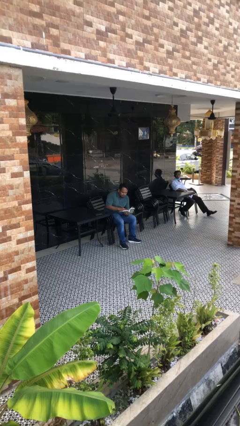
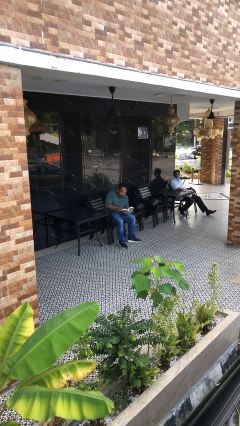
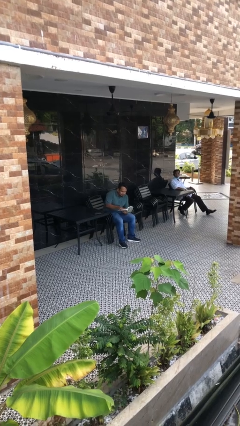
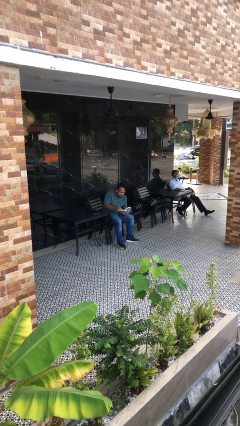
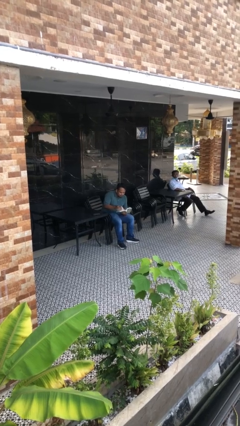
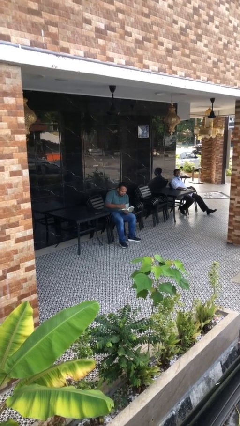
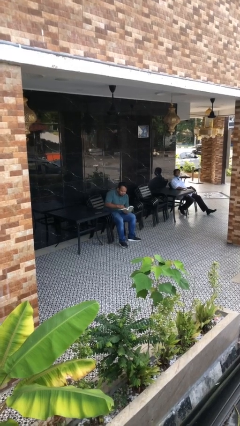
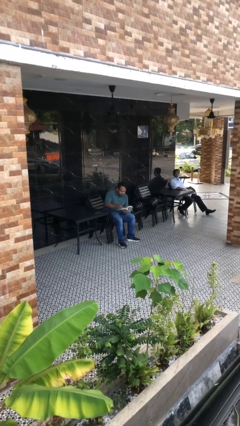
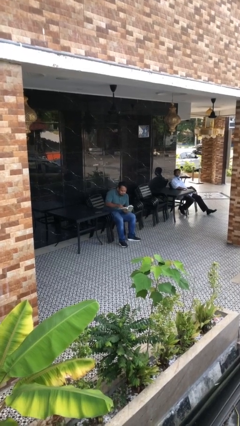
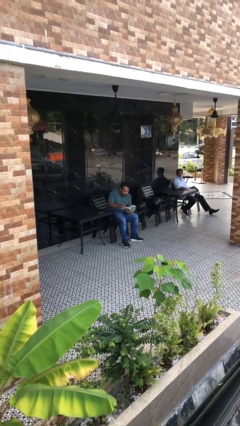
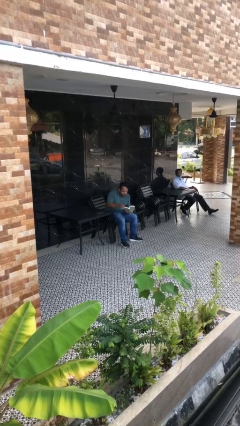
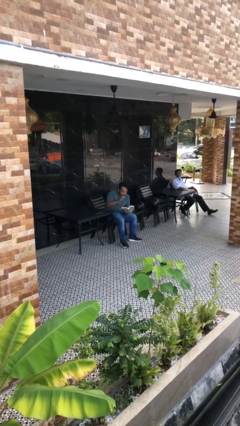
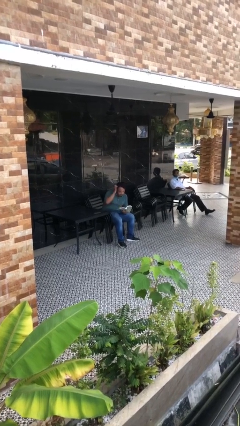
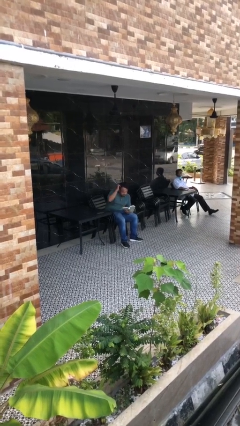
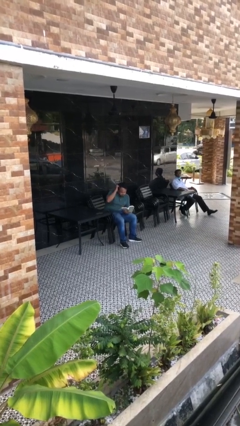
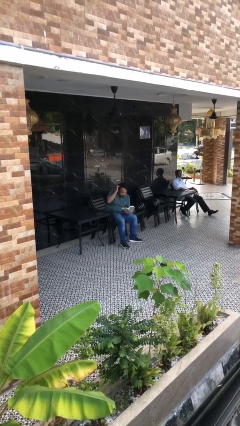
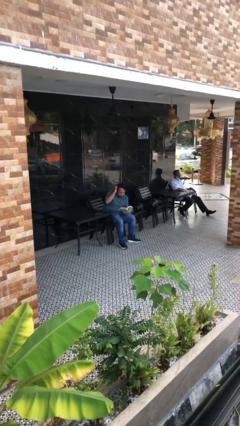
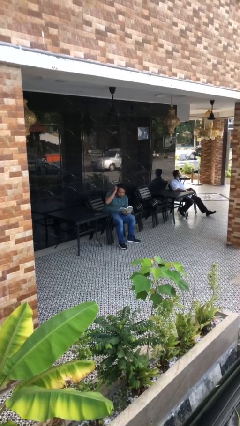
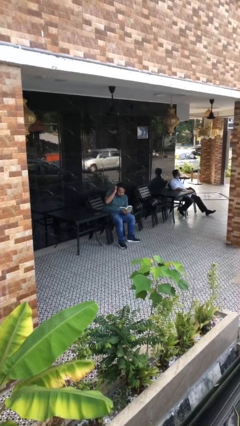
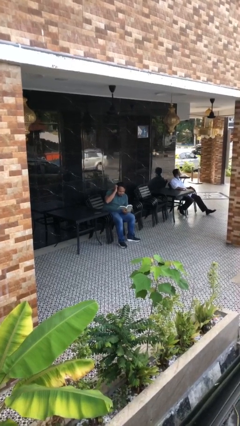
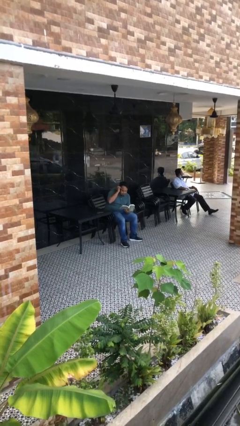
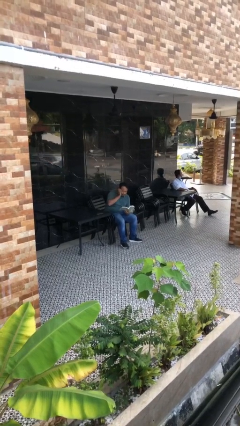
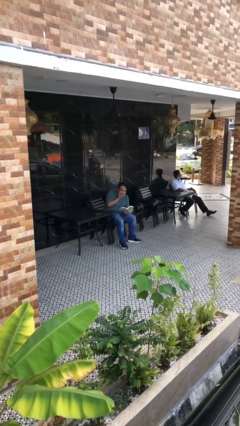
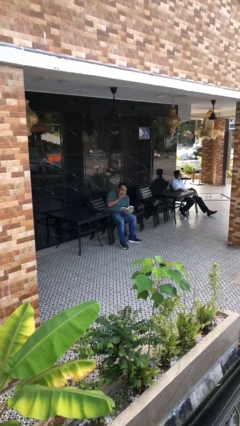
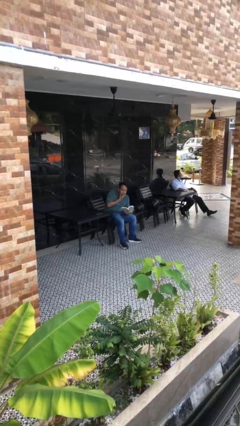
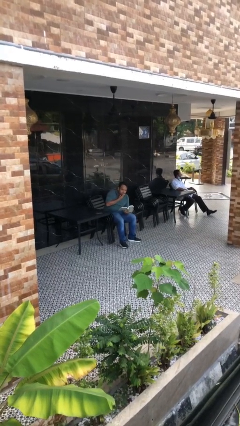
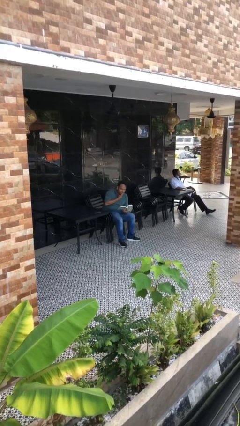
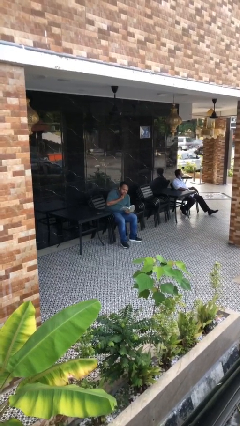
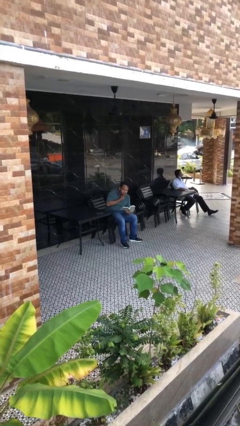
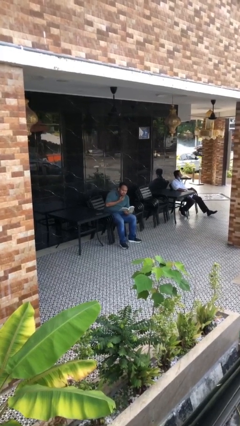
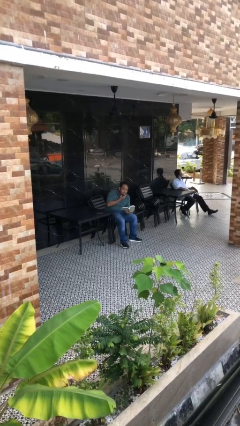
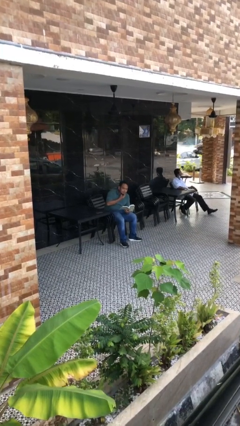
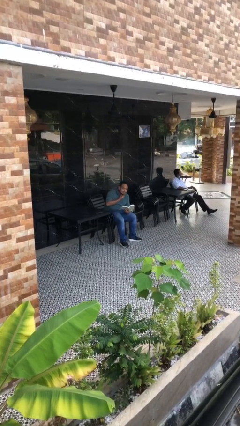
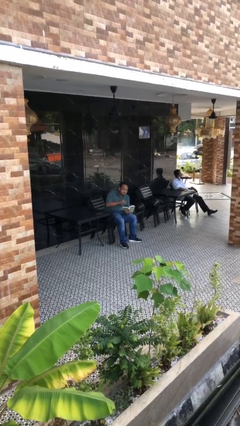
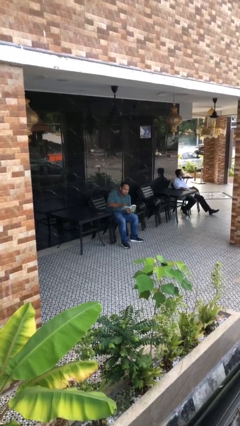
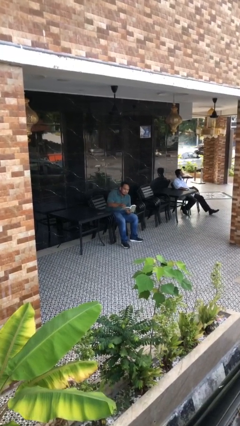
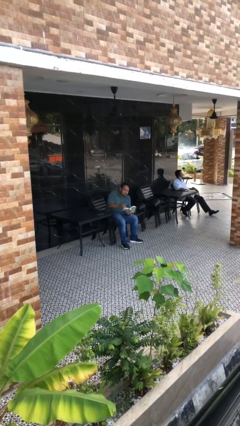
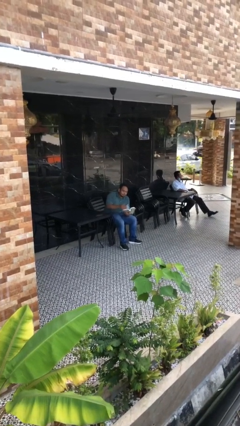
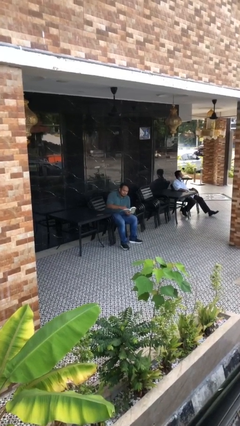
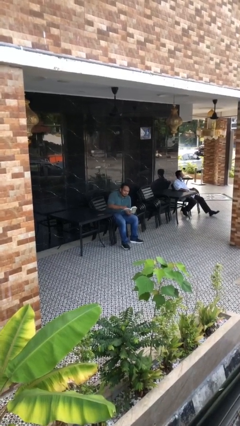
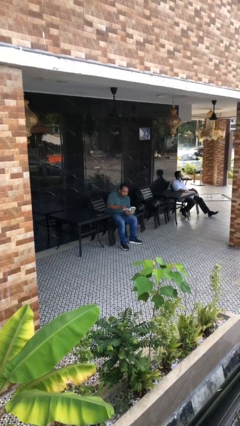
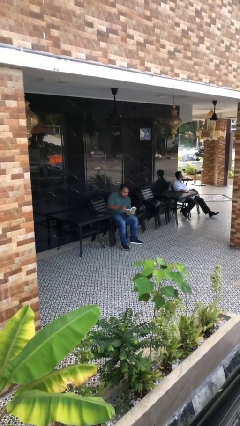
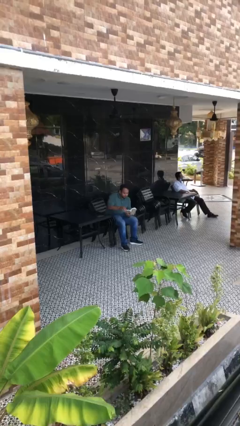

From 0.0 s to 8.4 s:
person reads document

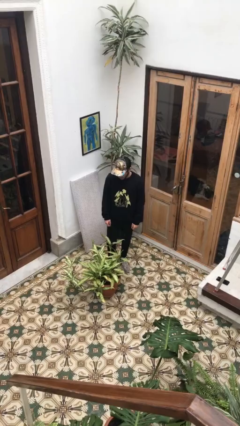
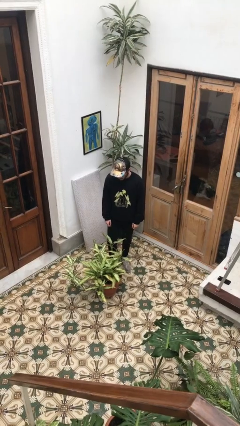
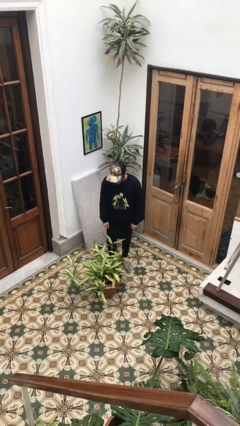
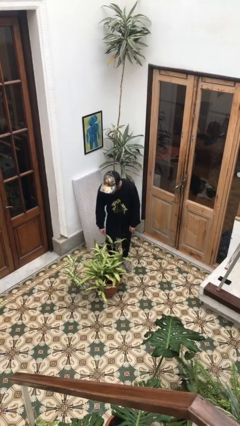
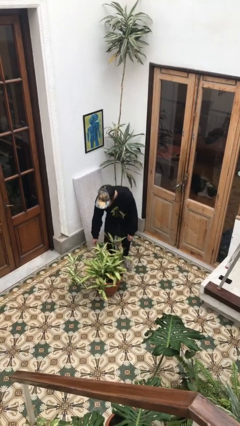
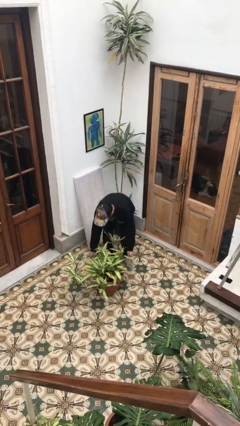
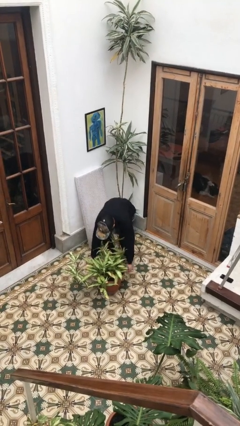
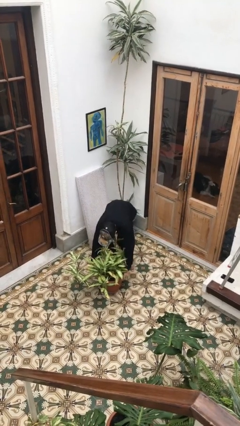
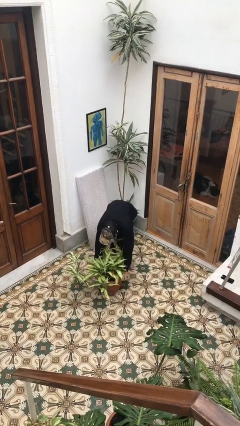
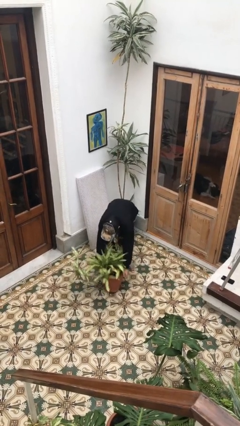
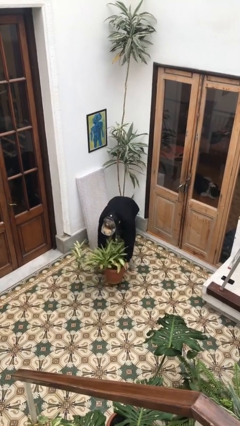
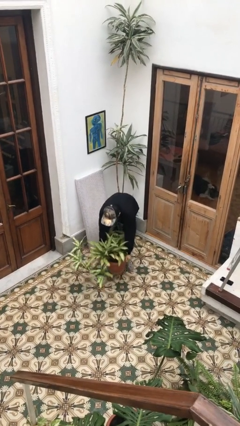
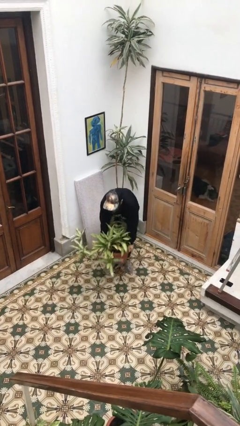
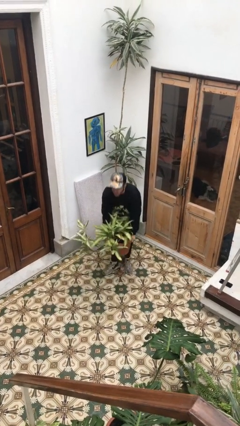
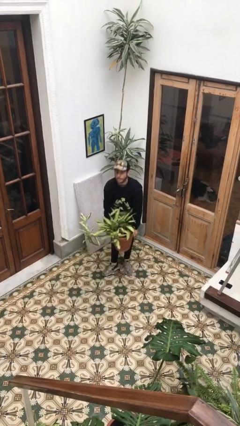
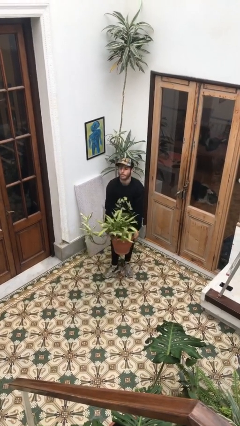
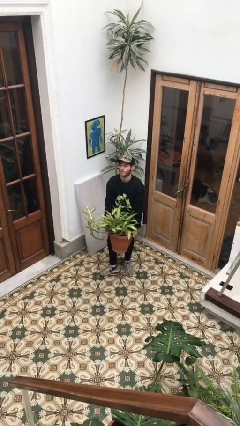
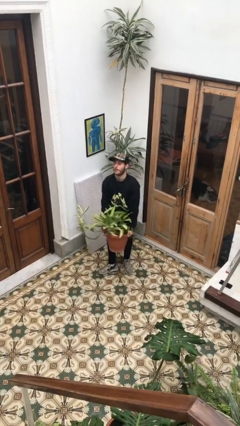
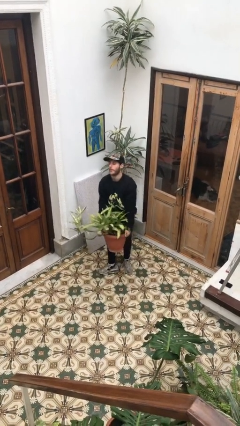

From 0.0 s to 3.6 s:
person picks up object from floor

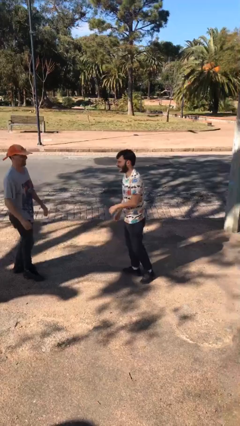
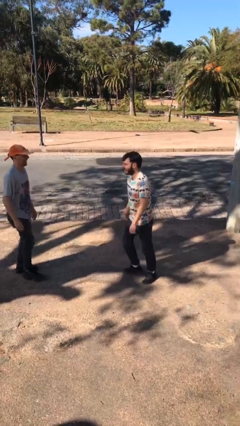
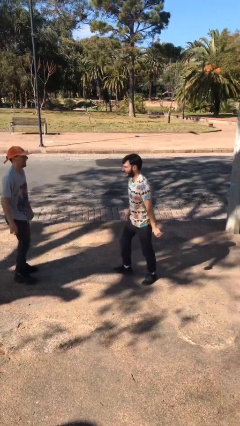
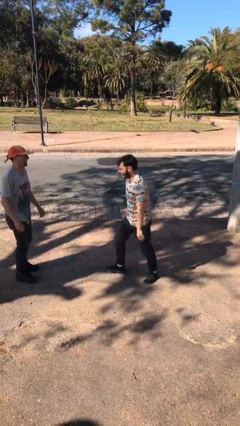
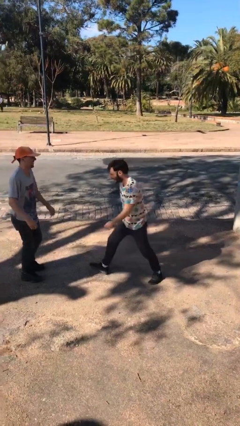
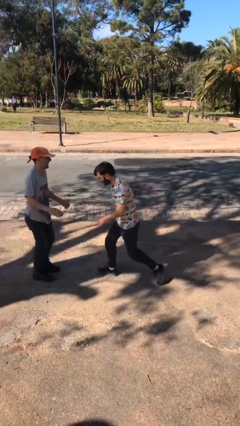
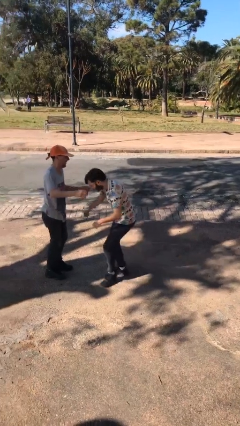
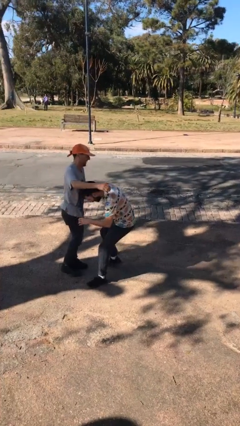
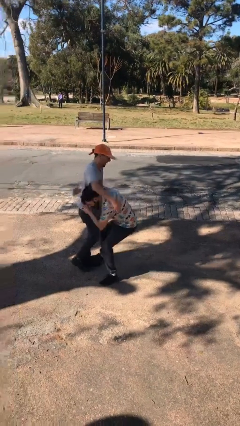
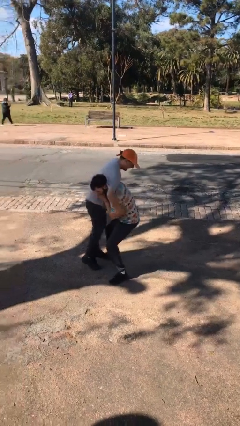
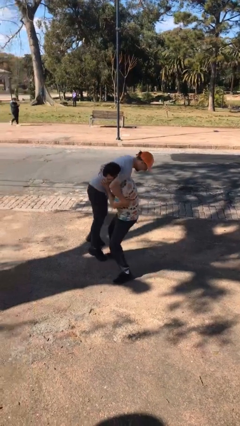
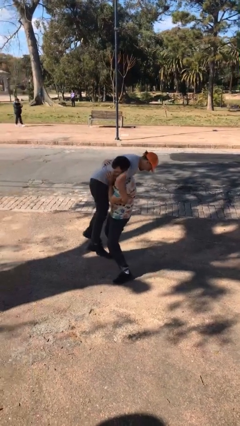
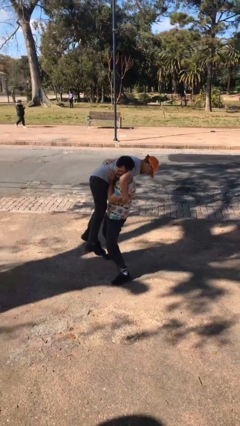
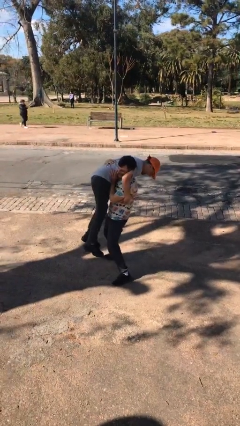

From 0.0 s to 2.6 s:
person carries person over shoulder

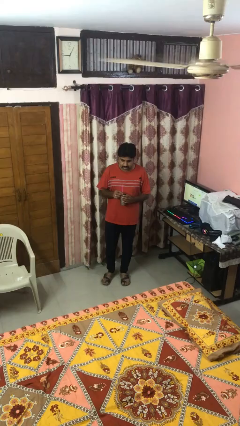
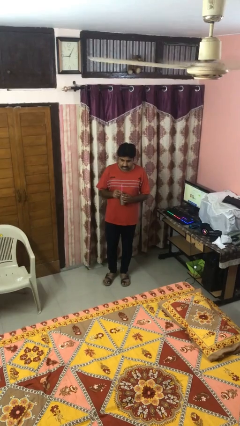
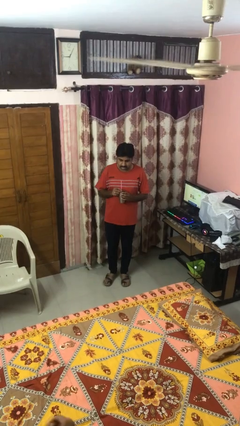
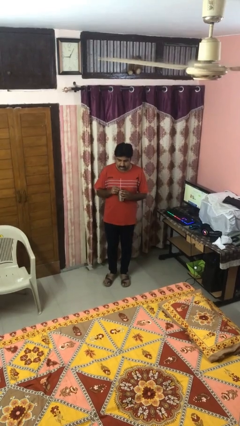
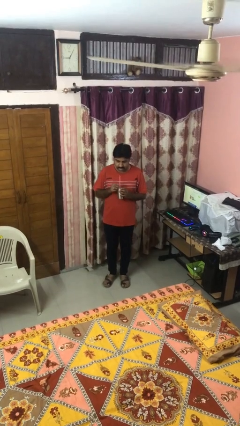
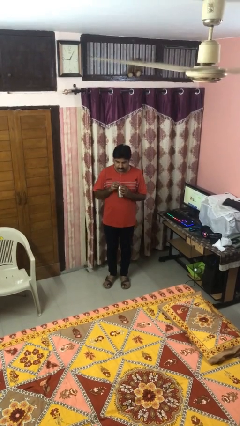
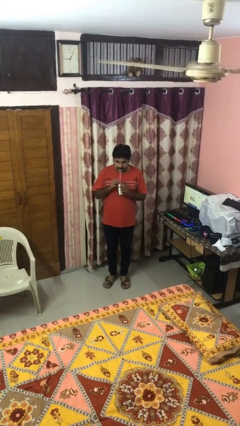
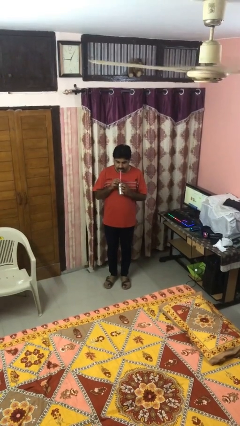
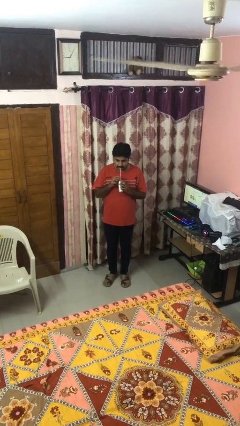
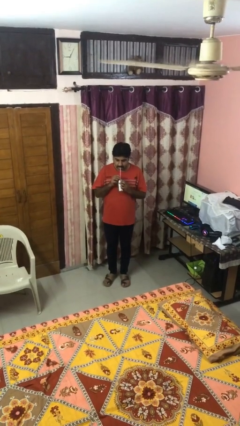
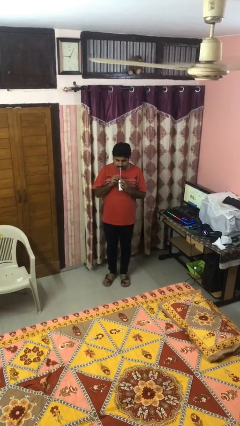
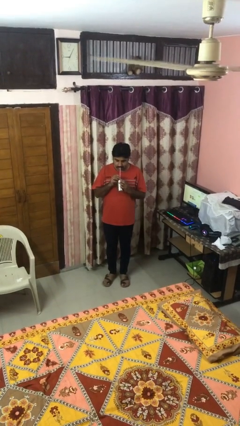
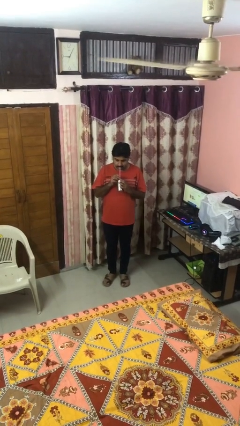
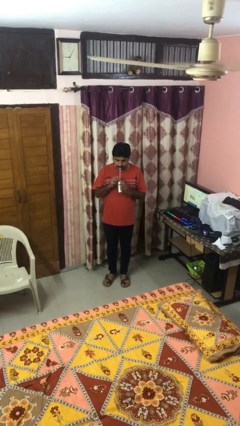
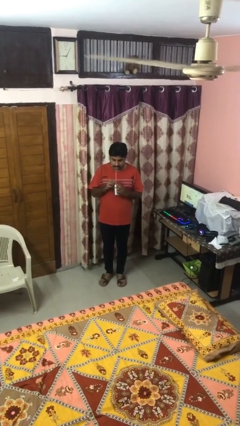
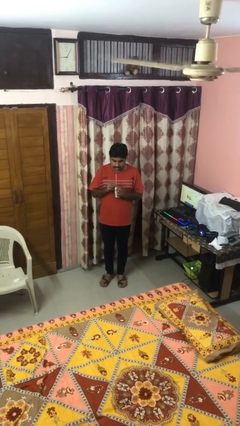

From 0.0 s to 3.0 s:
person drinks from straw

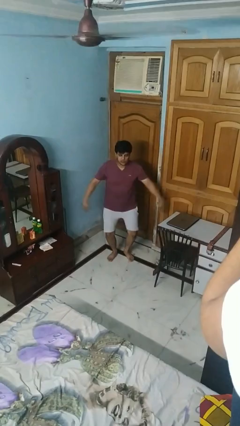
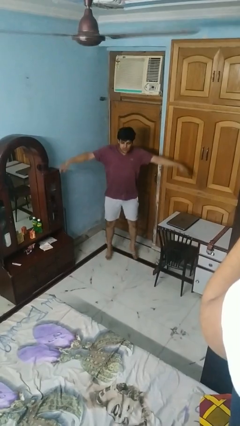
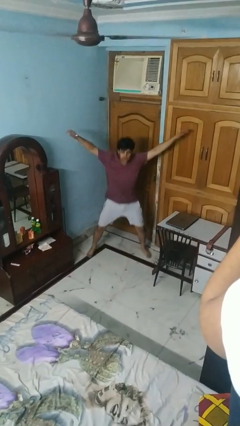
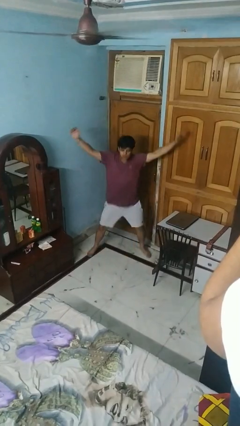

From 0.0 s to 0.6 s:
person exercises with jumping jacks
